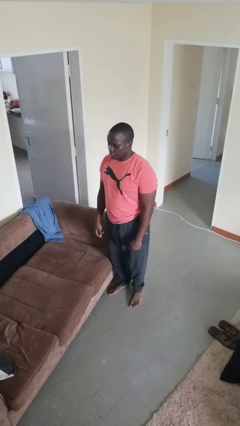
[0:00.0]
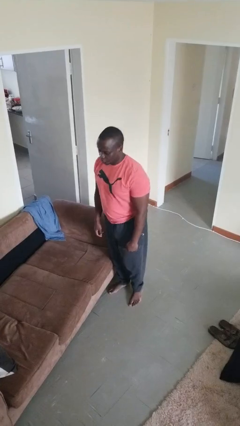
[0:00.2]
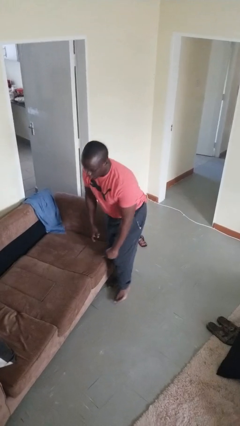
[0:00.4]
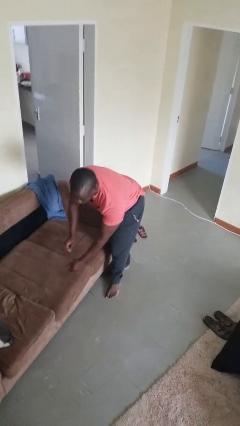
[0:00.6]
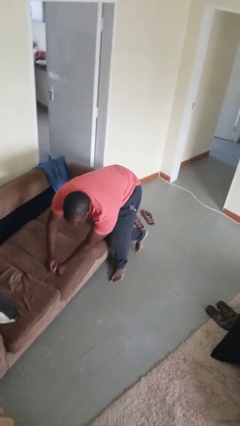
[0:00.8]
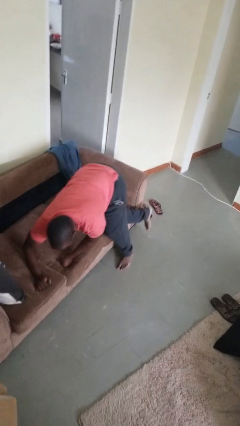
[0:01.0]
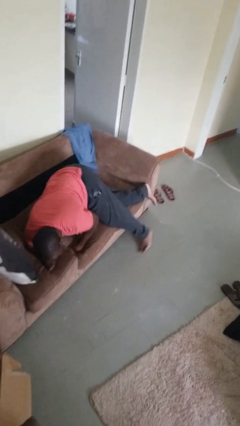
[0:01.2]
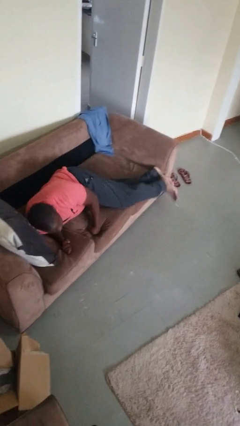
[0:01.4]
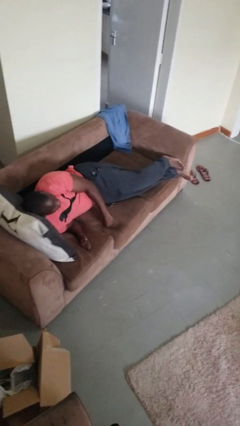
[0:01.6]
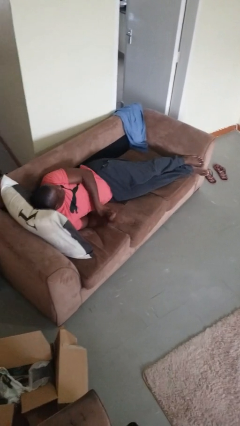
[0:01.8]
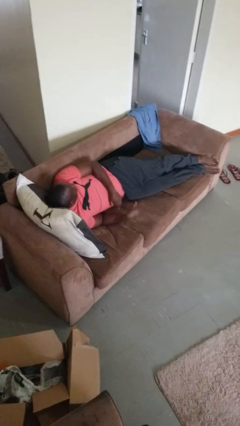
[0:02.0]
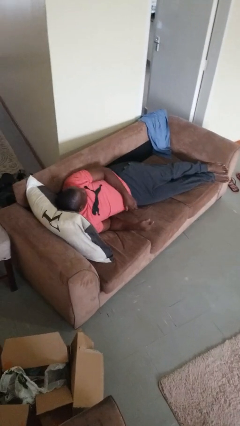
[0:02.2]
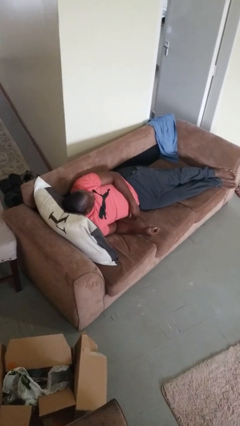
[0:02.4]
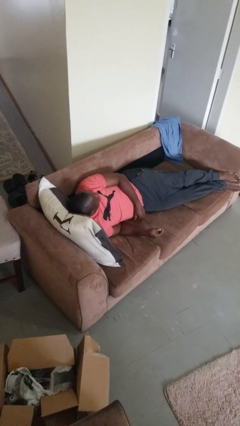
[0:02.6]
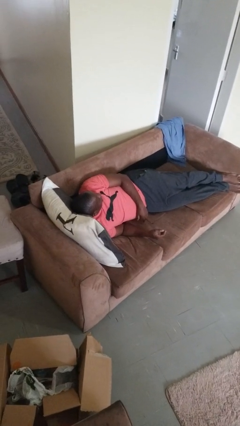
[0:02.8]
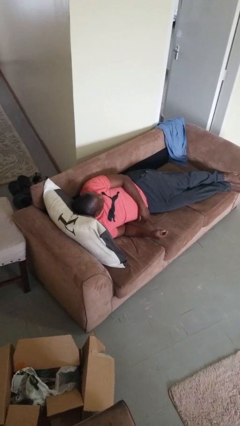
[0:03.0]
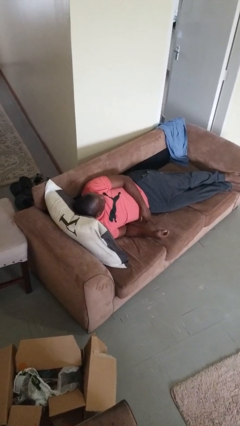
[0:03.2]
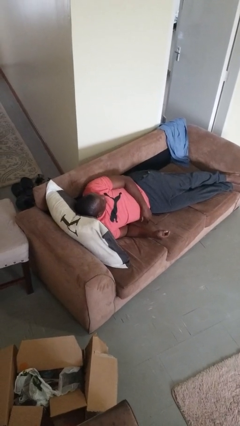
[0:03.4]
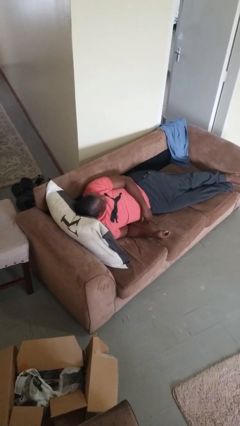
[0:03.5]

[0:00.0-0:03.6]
person lies down on couch

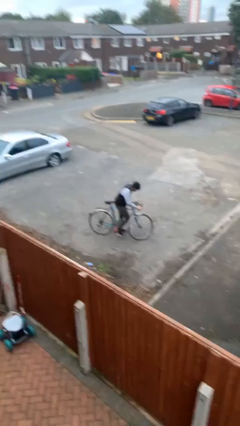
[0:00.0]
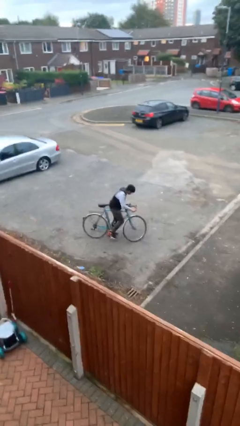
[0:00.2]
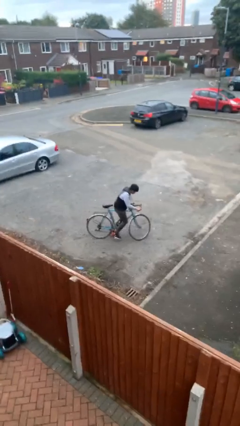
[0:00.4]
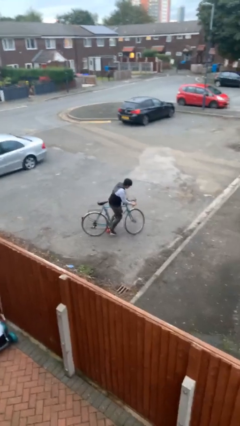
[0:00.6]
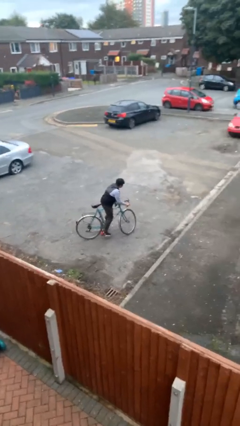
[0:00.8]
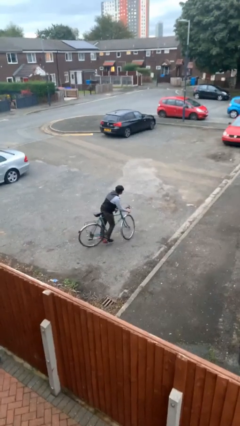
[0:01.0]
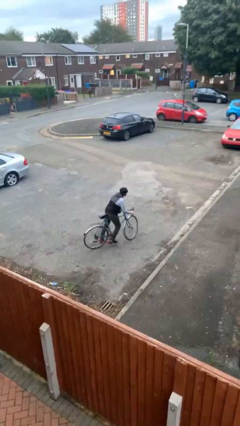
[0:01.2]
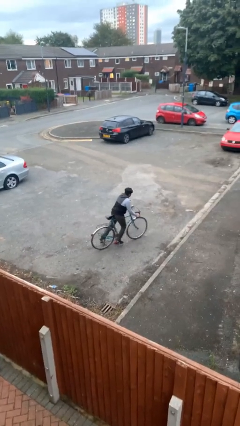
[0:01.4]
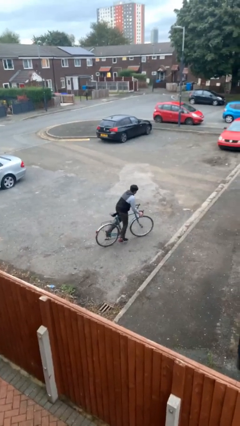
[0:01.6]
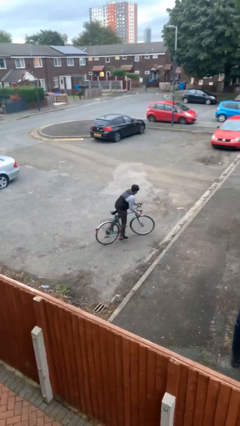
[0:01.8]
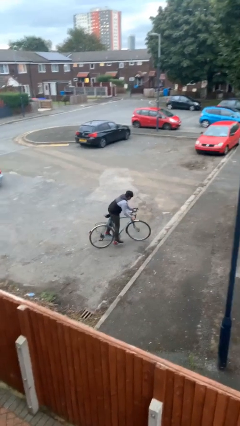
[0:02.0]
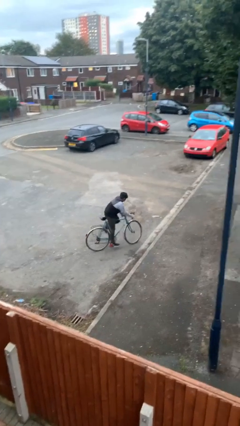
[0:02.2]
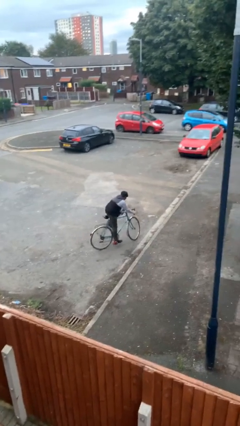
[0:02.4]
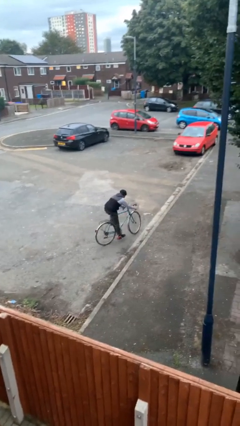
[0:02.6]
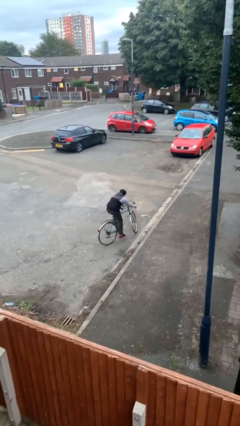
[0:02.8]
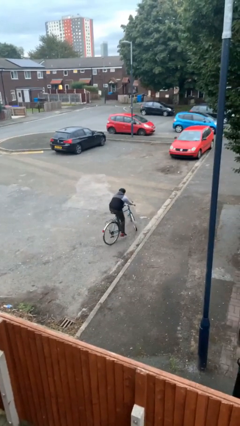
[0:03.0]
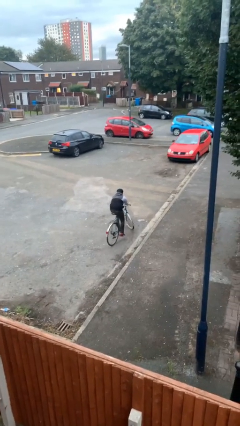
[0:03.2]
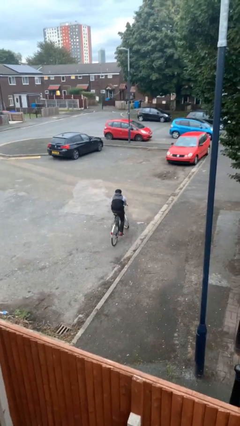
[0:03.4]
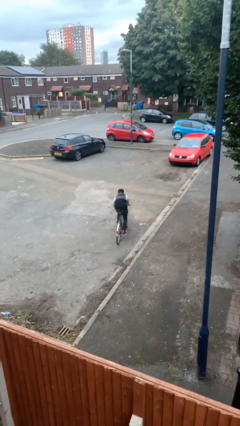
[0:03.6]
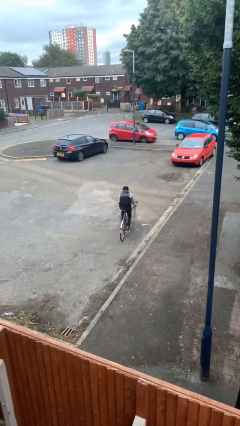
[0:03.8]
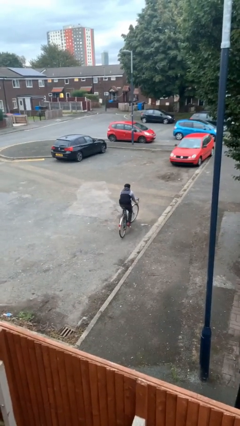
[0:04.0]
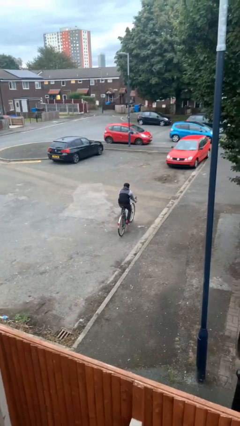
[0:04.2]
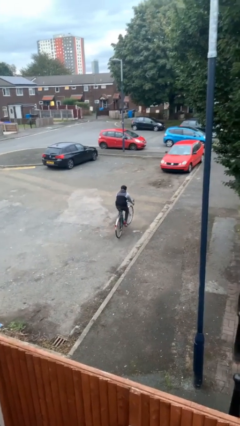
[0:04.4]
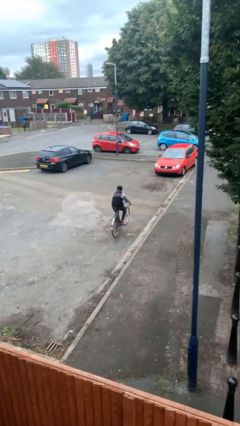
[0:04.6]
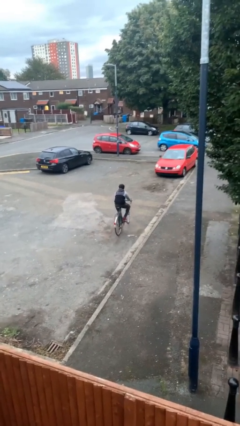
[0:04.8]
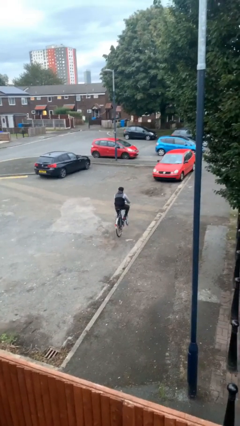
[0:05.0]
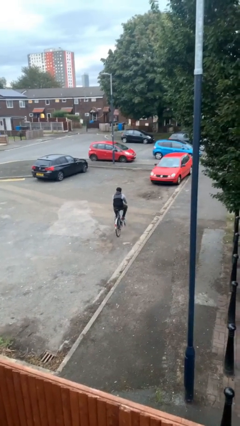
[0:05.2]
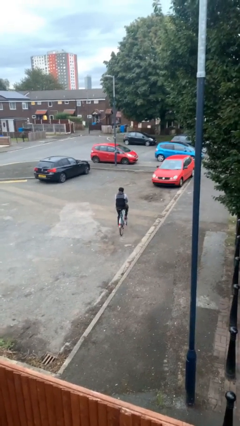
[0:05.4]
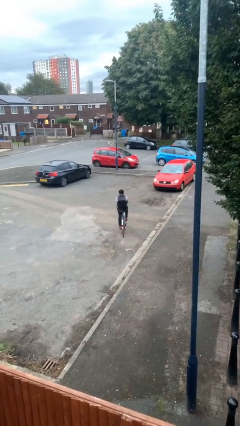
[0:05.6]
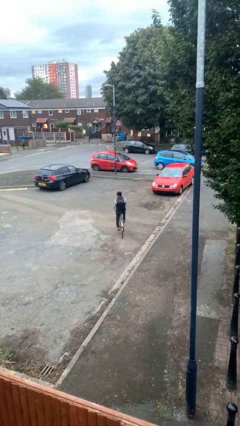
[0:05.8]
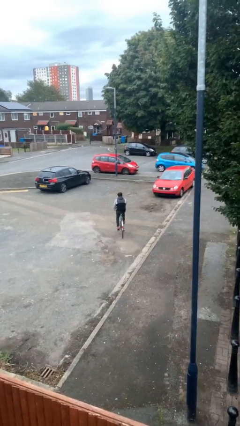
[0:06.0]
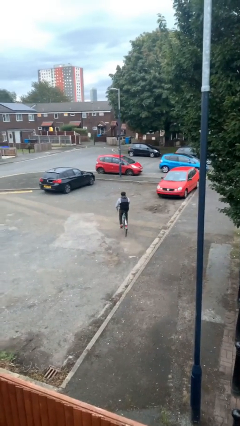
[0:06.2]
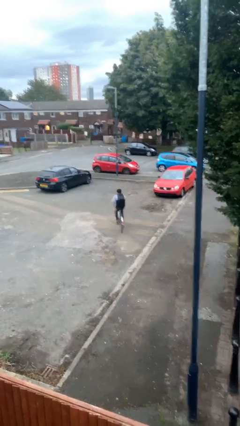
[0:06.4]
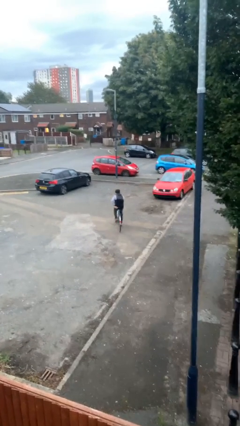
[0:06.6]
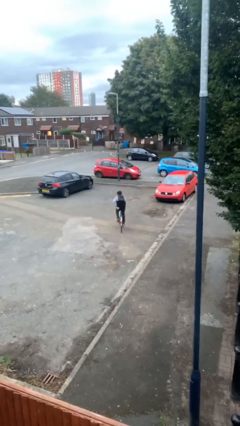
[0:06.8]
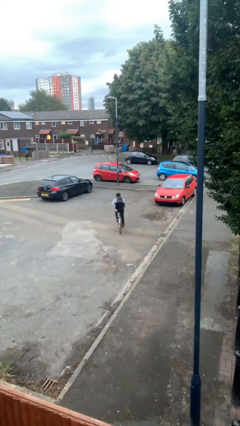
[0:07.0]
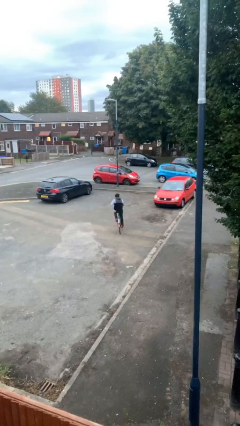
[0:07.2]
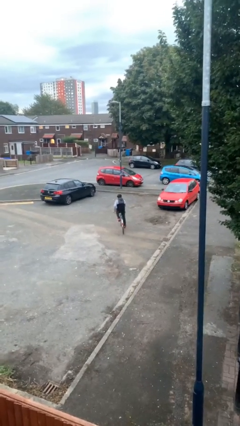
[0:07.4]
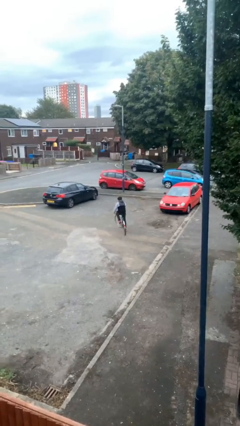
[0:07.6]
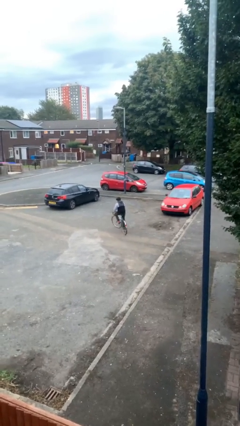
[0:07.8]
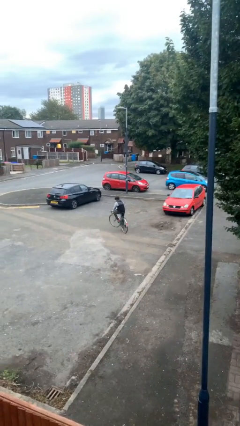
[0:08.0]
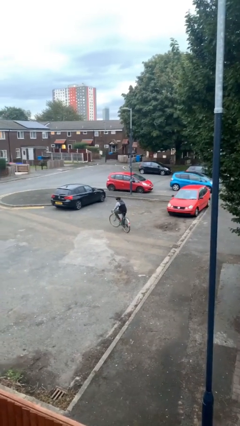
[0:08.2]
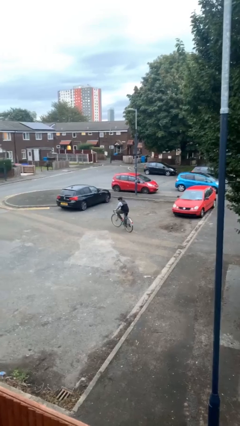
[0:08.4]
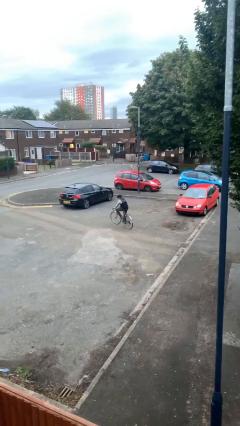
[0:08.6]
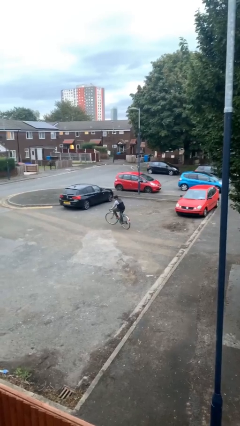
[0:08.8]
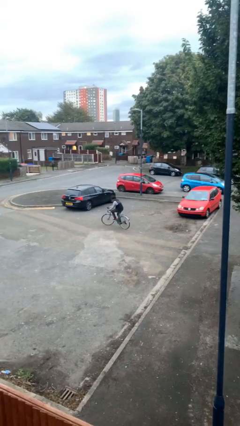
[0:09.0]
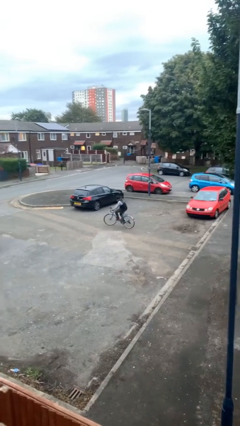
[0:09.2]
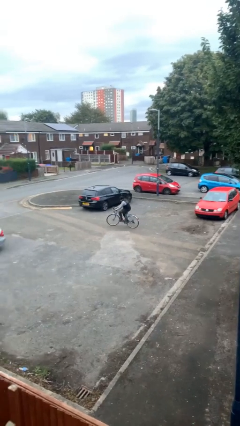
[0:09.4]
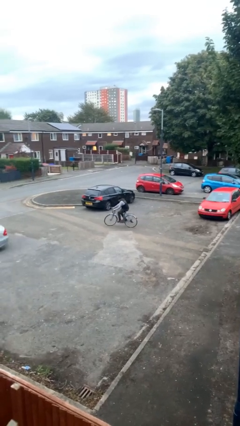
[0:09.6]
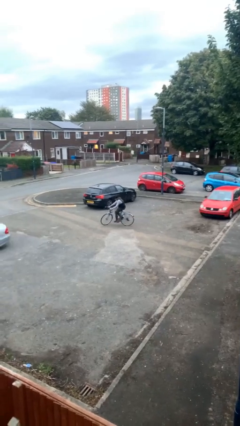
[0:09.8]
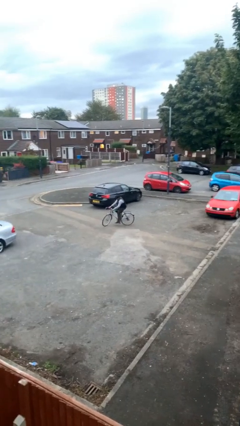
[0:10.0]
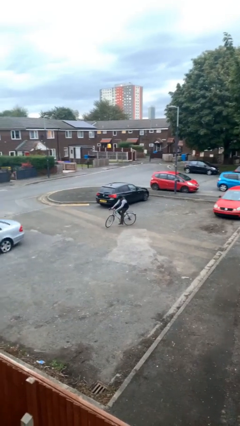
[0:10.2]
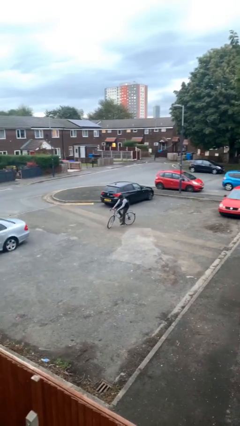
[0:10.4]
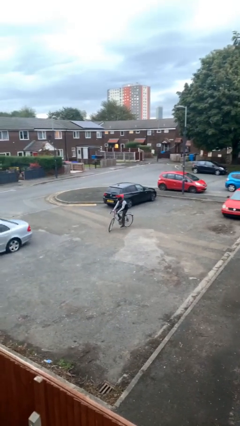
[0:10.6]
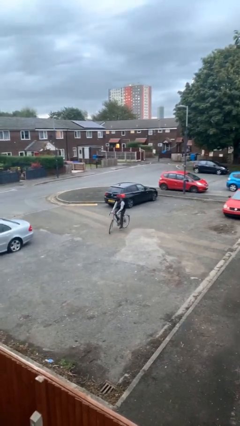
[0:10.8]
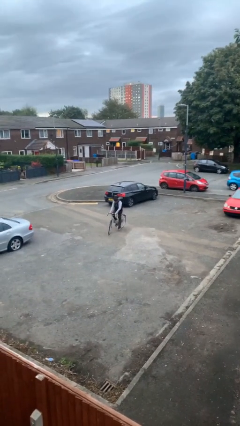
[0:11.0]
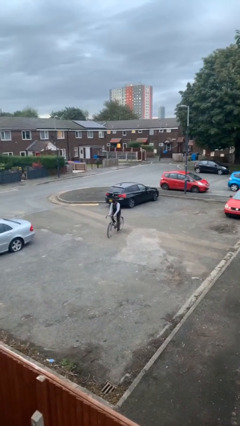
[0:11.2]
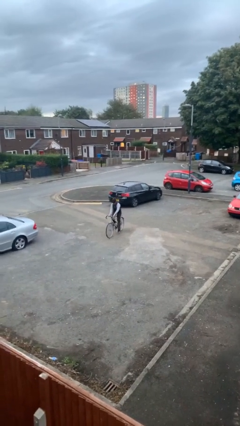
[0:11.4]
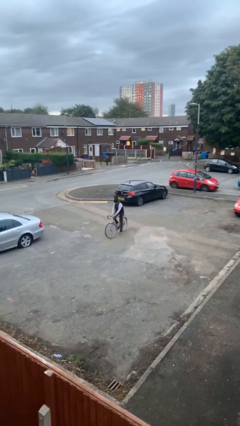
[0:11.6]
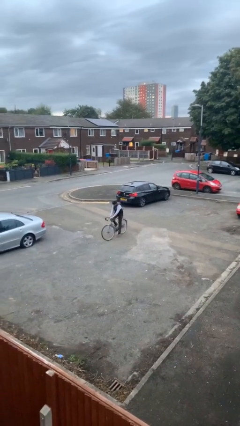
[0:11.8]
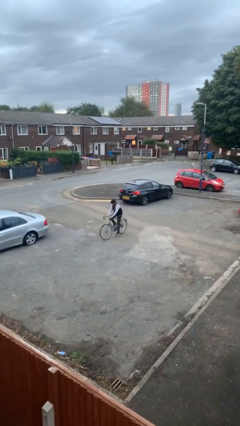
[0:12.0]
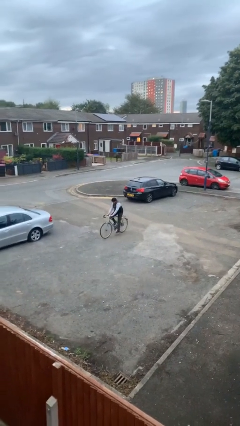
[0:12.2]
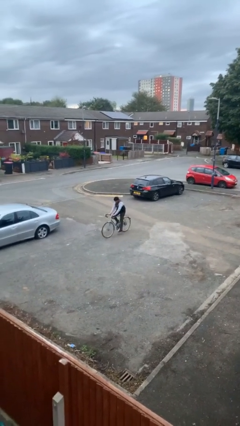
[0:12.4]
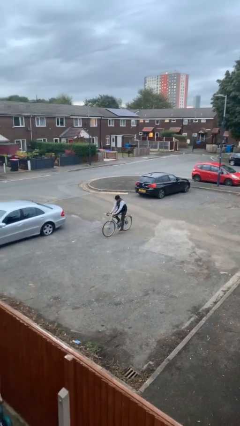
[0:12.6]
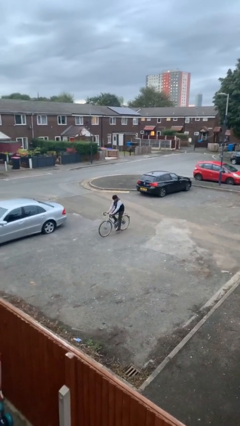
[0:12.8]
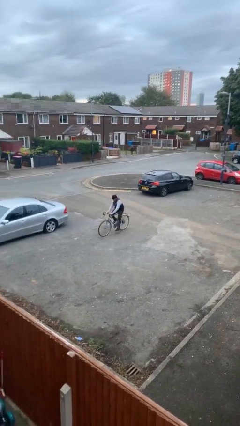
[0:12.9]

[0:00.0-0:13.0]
person rides bicycle

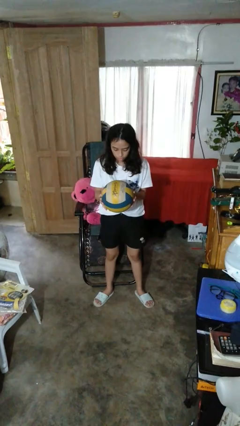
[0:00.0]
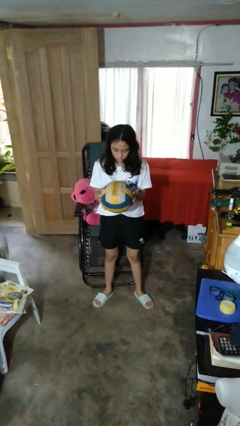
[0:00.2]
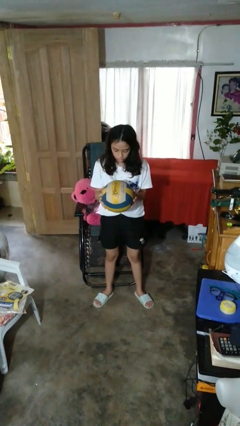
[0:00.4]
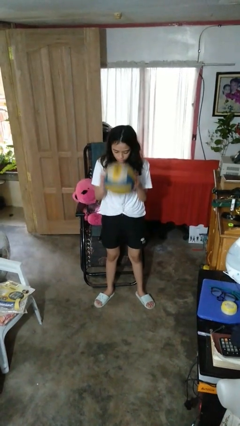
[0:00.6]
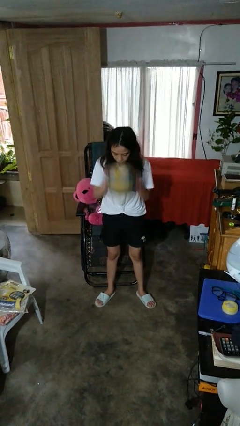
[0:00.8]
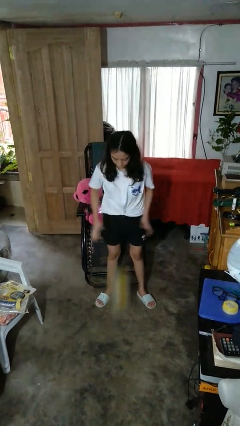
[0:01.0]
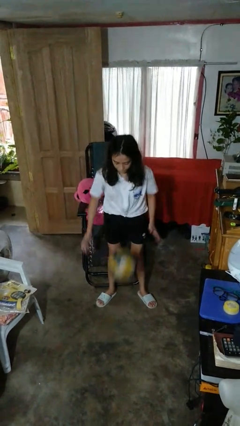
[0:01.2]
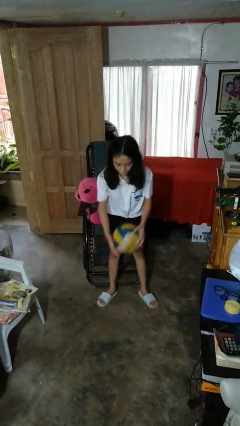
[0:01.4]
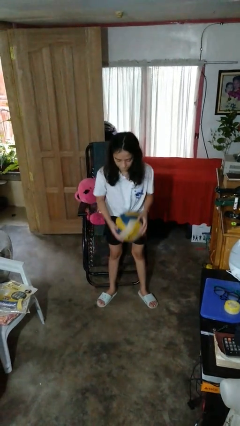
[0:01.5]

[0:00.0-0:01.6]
person bounces ball on floor
